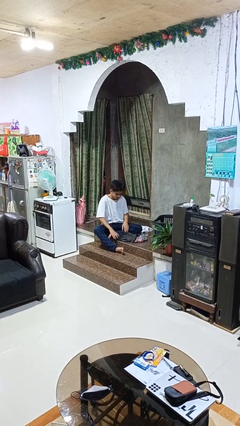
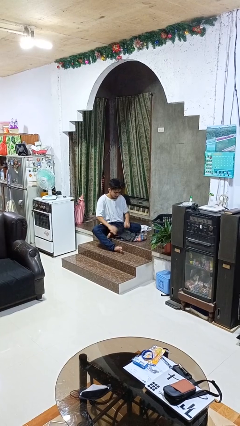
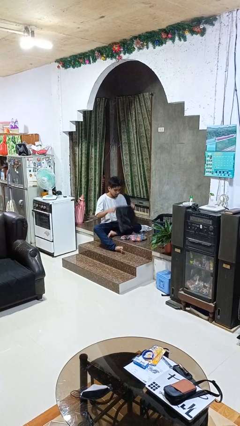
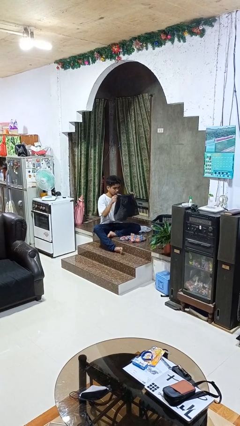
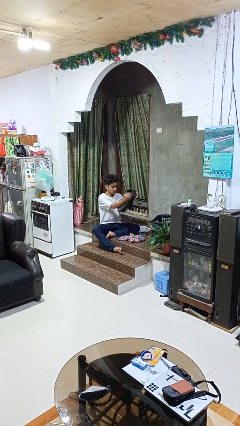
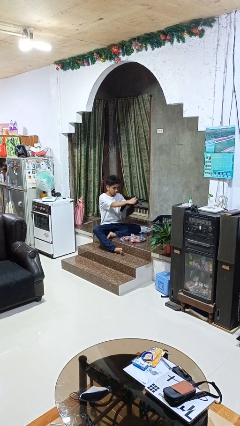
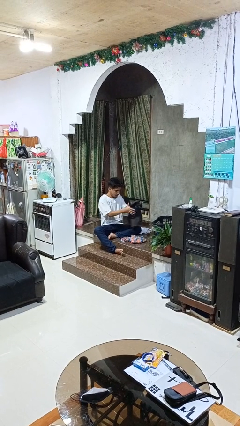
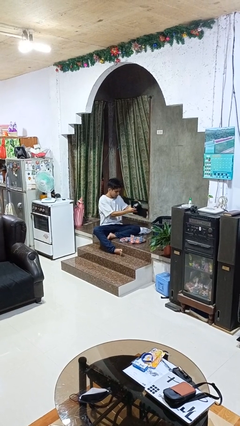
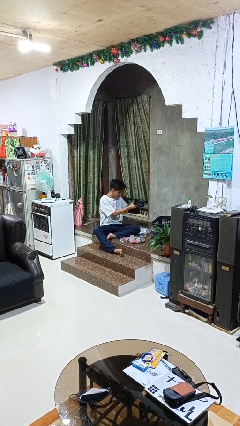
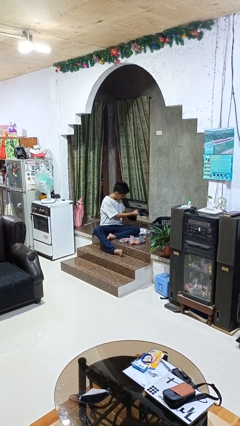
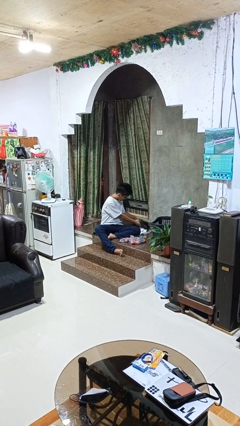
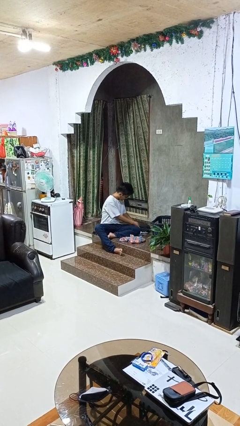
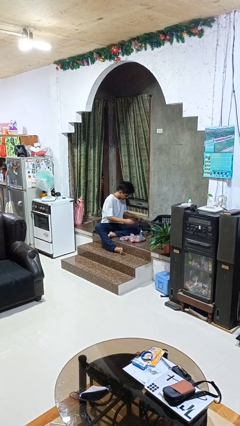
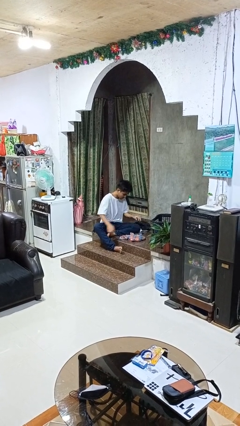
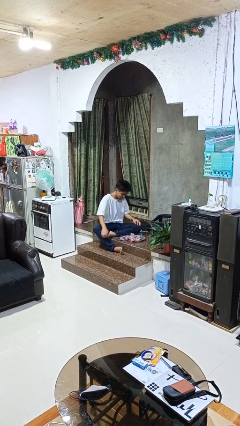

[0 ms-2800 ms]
person folds pants

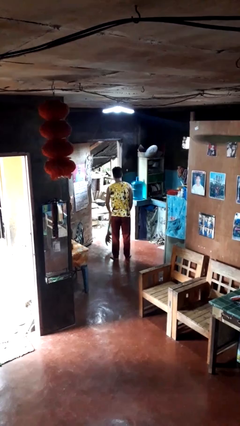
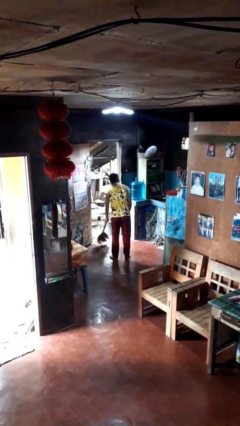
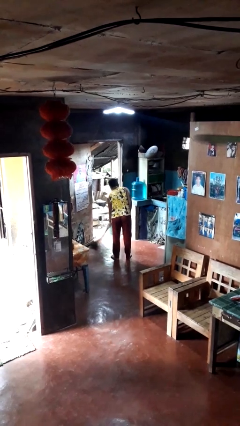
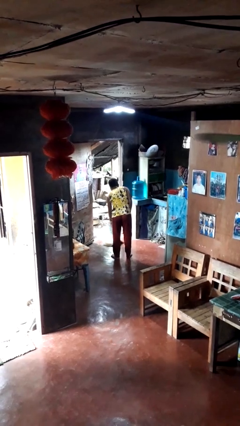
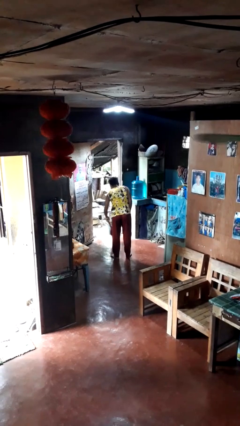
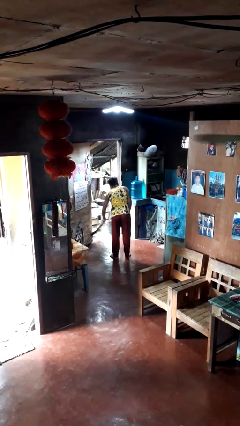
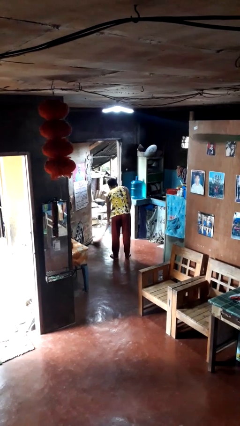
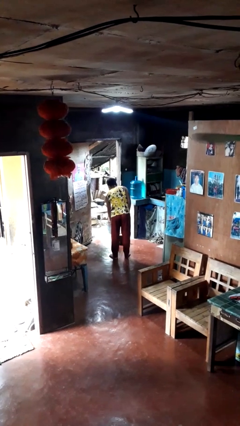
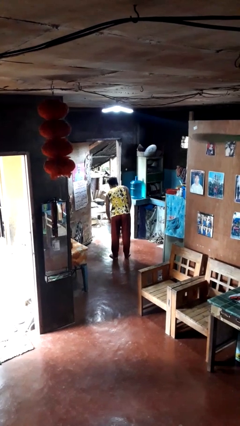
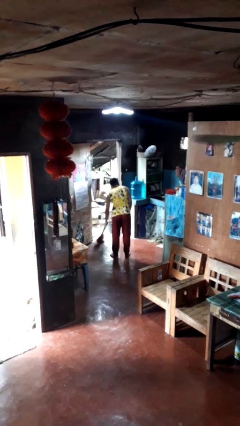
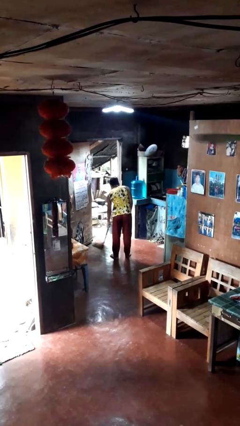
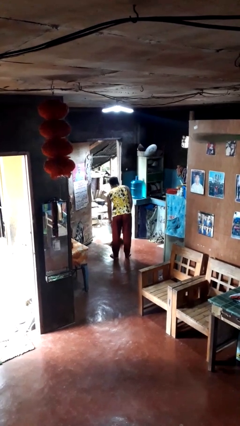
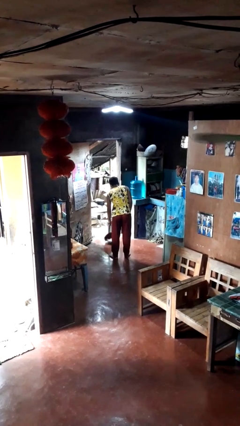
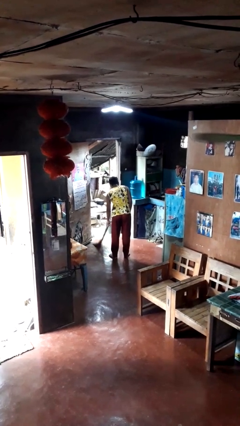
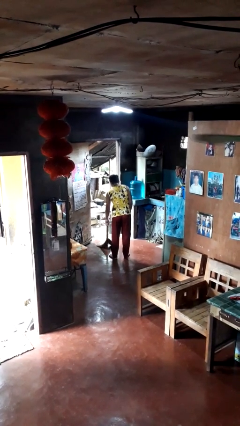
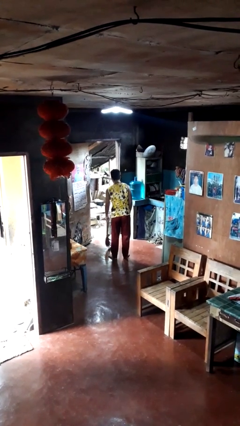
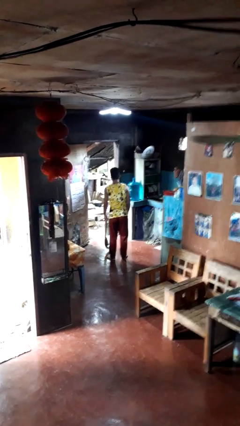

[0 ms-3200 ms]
person sweeps floor

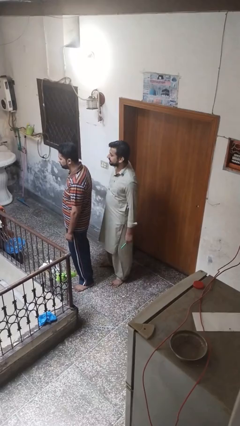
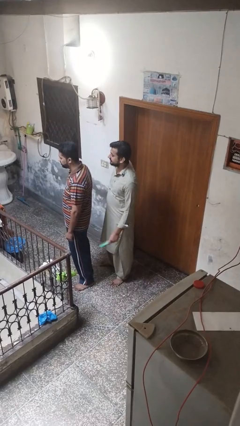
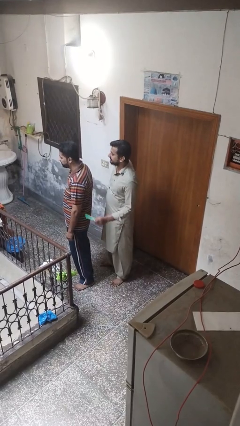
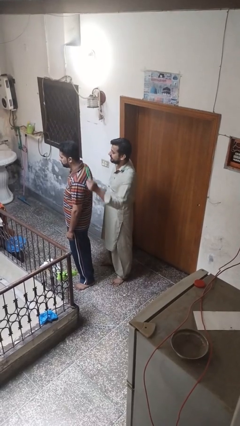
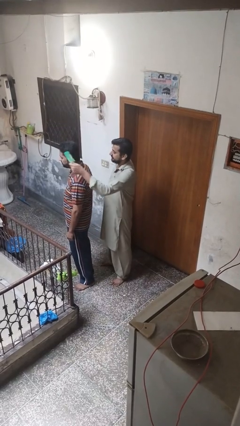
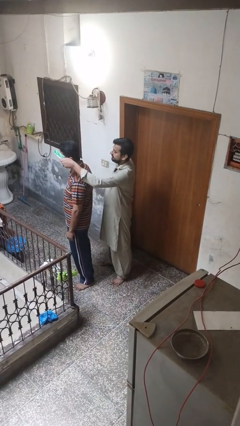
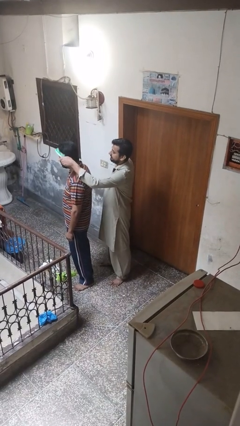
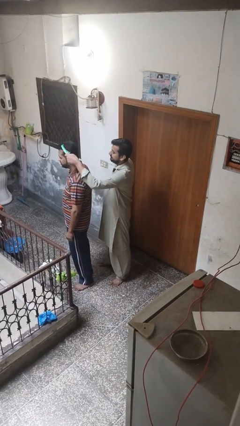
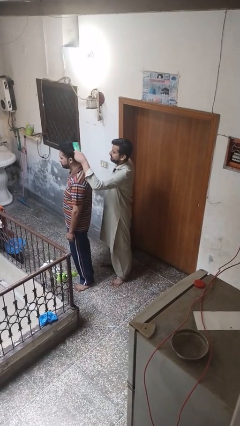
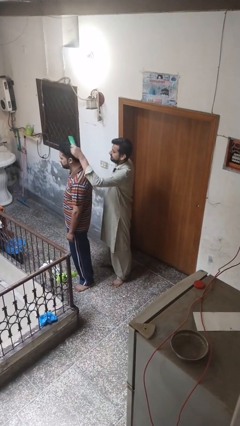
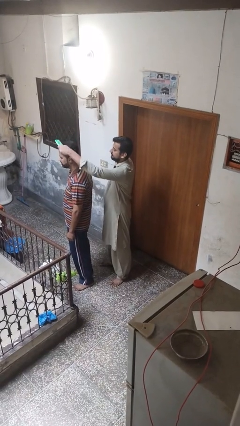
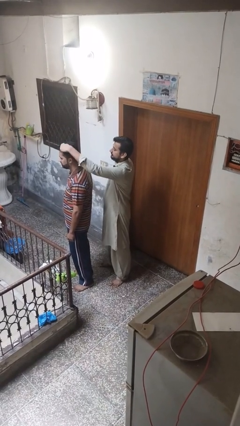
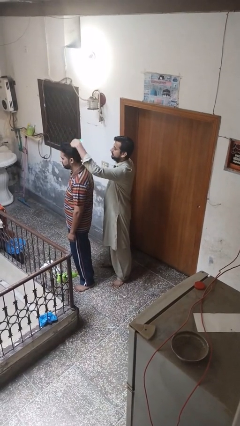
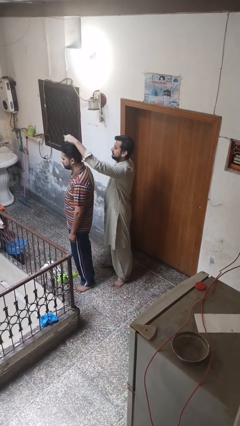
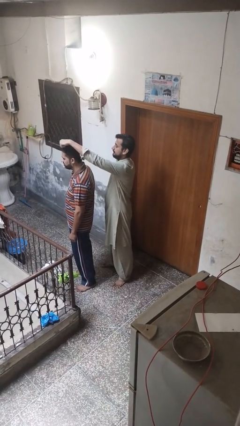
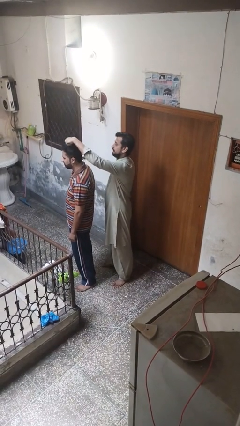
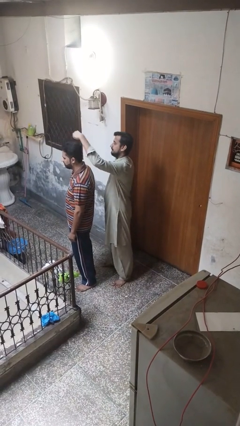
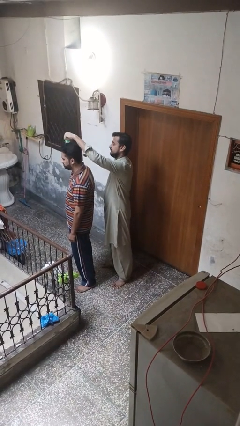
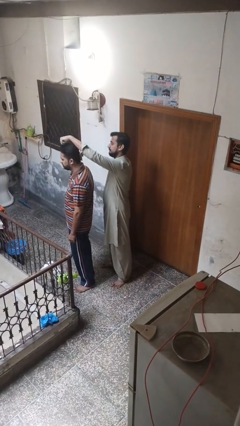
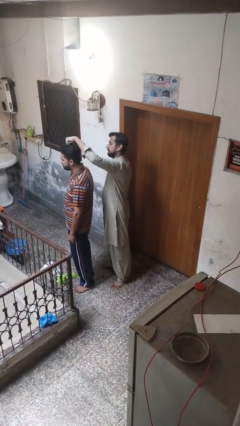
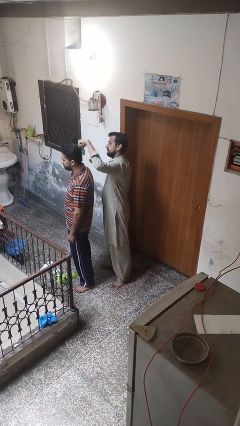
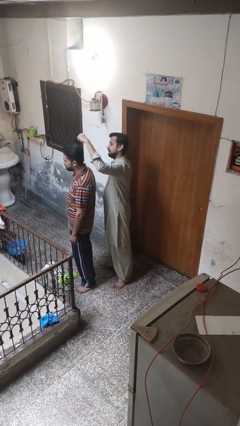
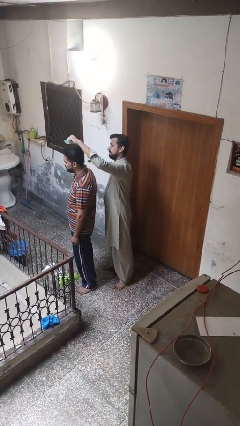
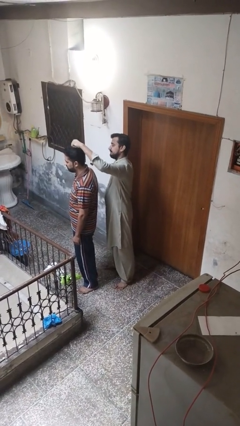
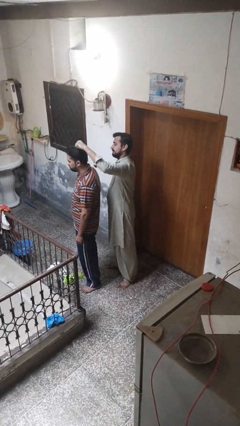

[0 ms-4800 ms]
person brushes hair of person

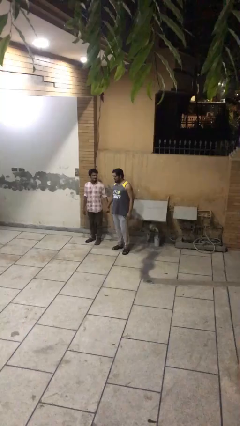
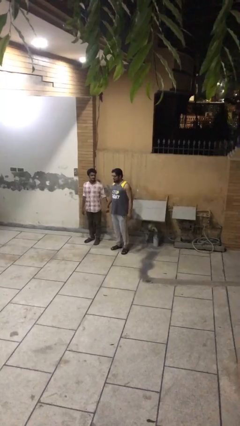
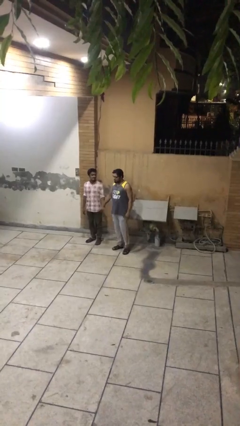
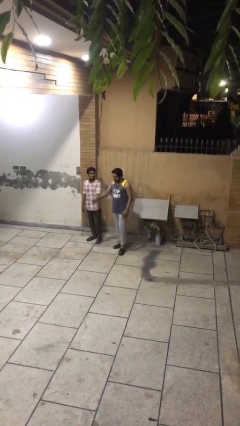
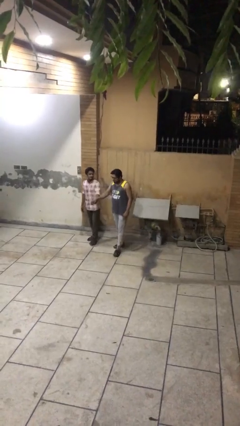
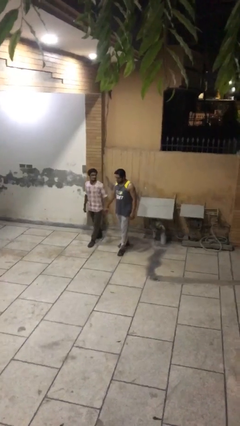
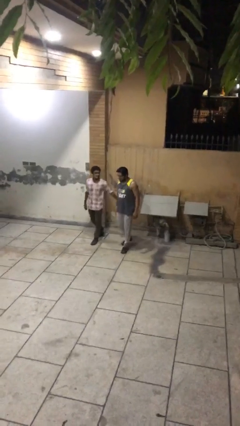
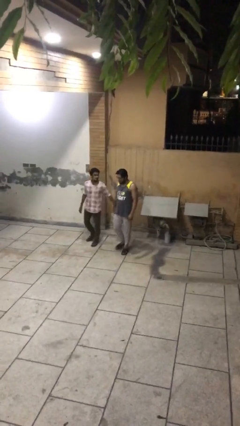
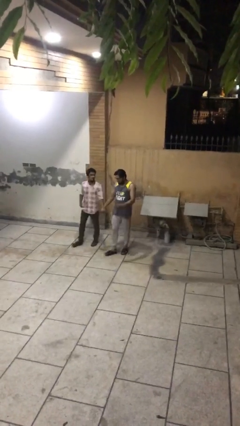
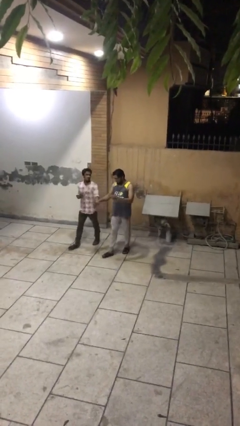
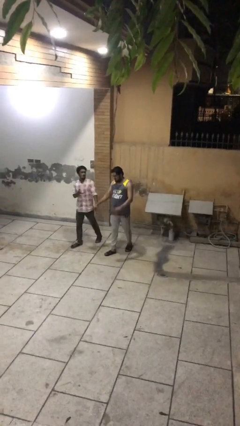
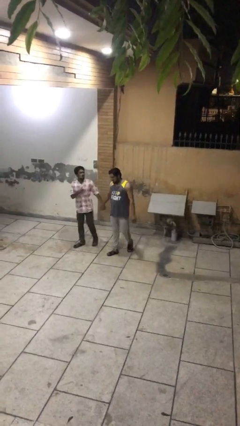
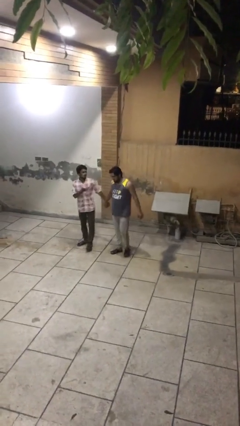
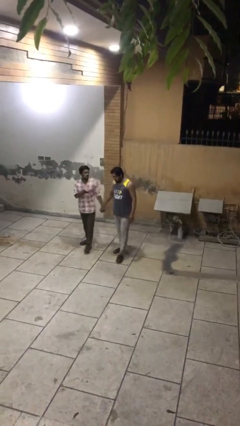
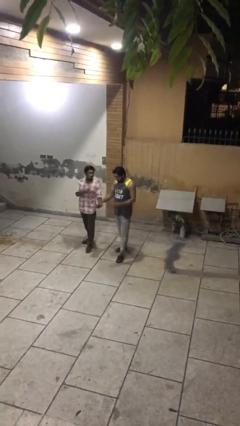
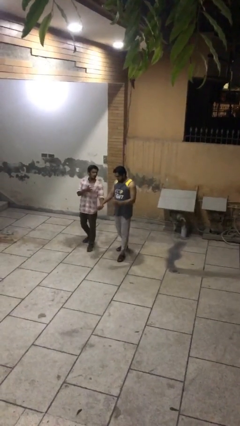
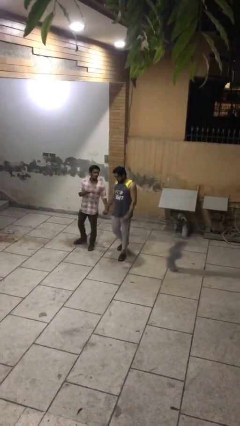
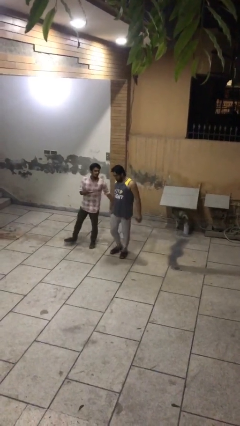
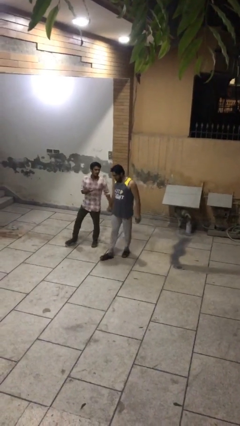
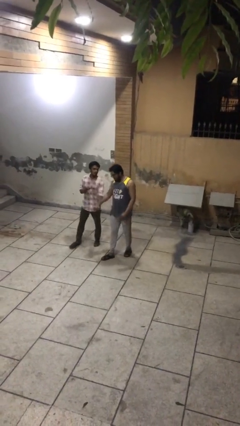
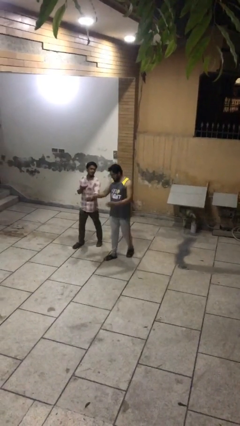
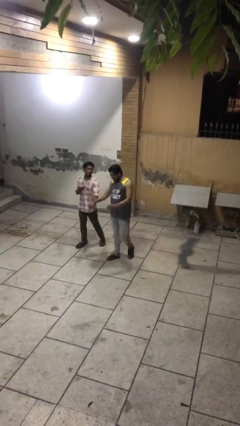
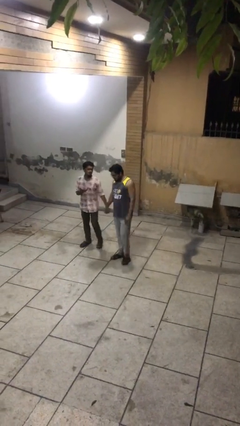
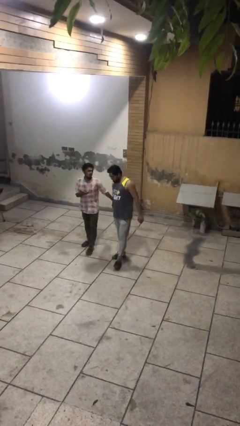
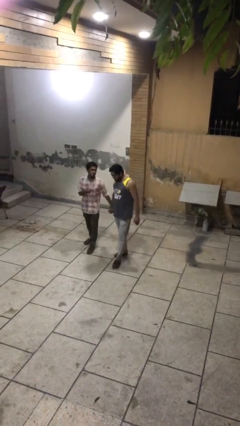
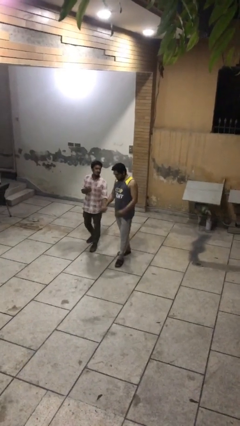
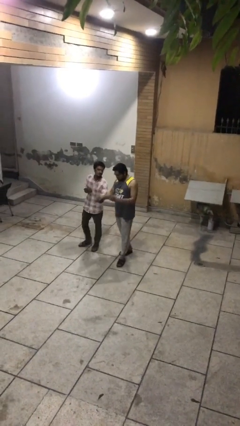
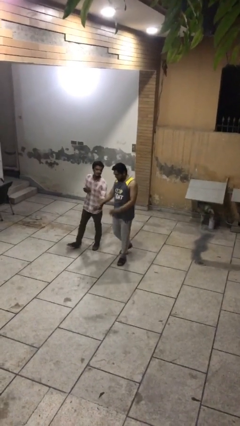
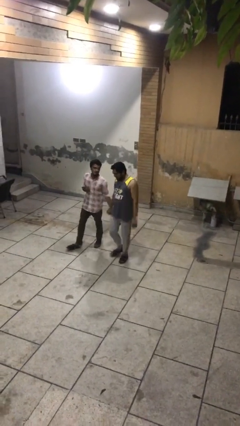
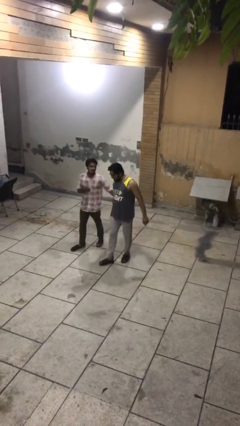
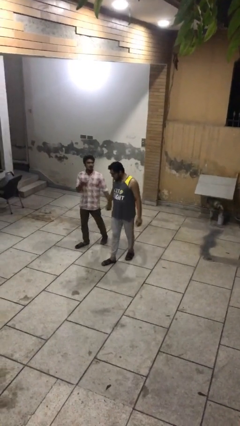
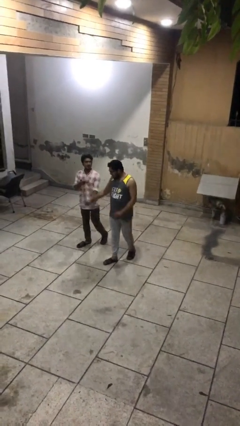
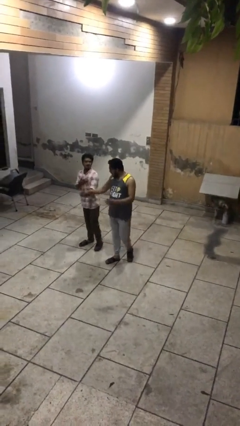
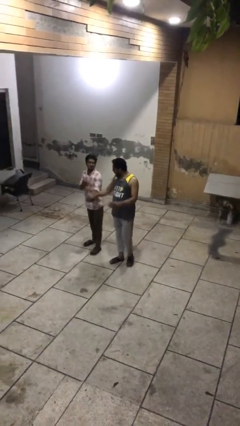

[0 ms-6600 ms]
person holds hand
